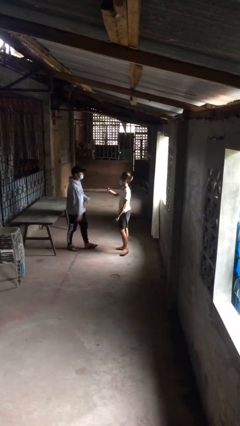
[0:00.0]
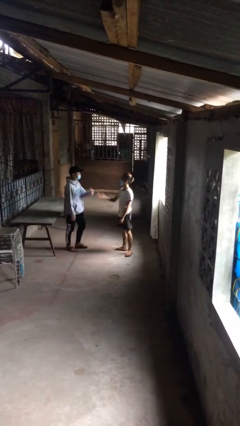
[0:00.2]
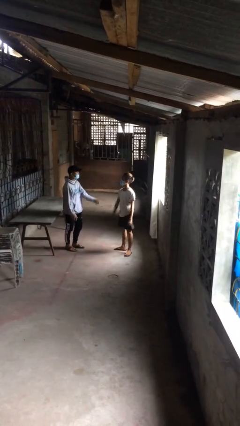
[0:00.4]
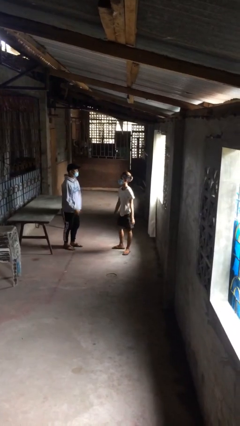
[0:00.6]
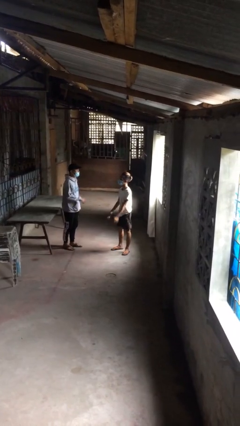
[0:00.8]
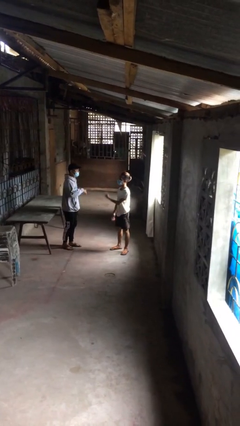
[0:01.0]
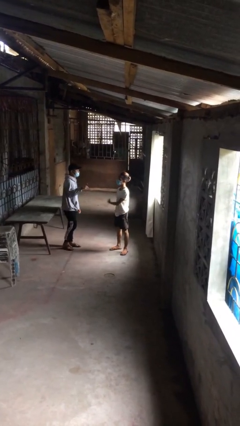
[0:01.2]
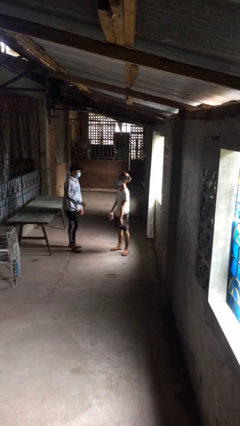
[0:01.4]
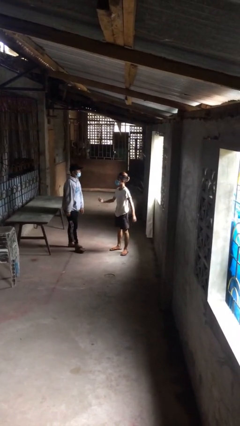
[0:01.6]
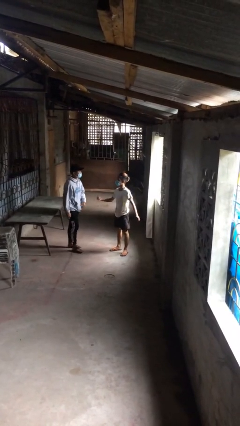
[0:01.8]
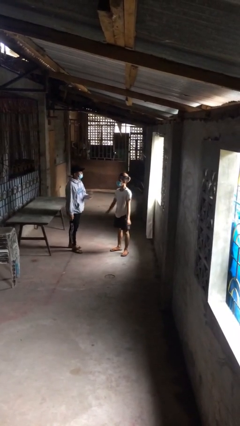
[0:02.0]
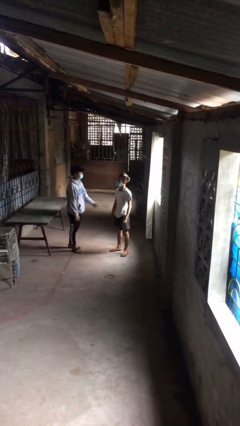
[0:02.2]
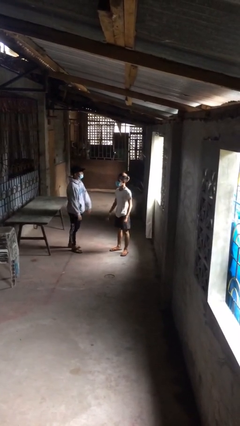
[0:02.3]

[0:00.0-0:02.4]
person talks to person

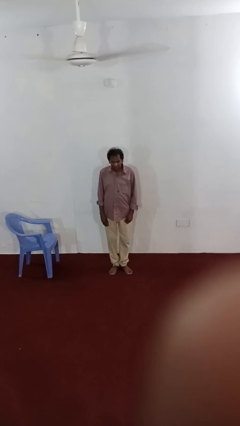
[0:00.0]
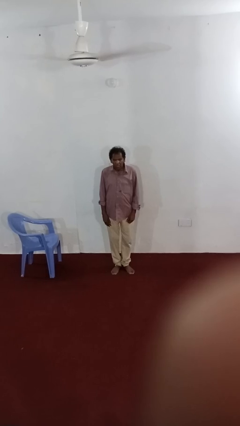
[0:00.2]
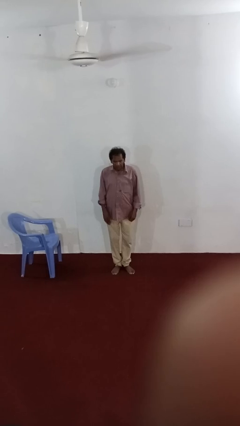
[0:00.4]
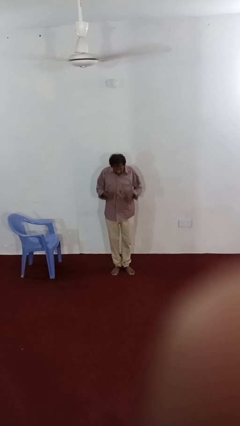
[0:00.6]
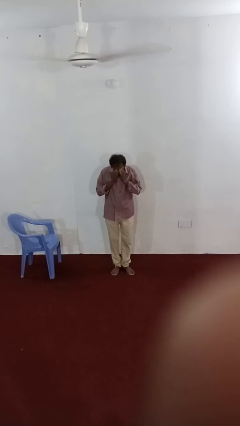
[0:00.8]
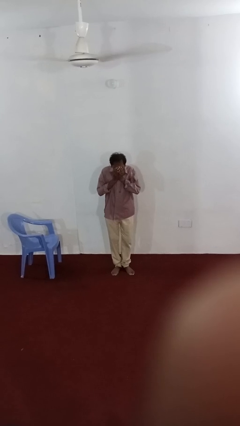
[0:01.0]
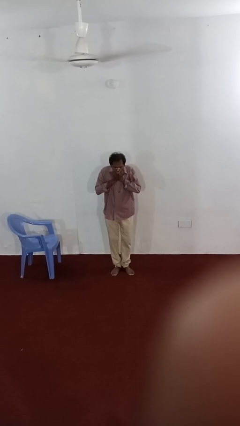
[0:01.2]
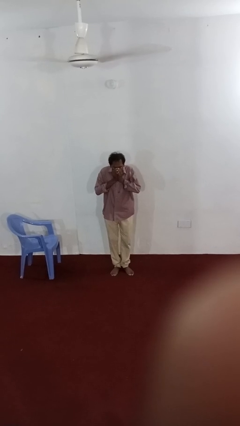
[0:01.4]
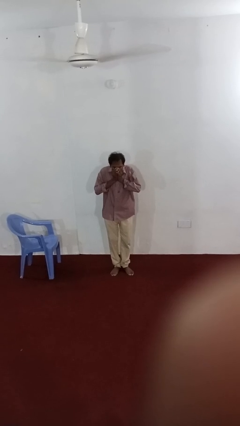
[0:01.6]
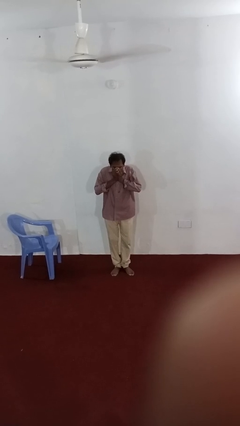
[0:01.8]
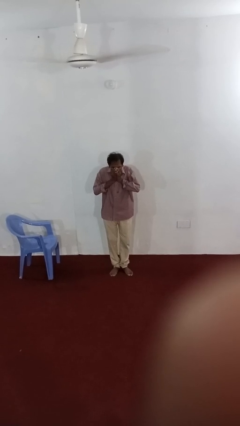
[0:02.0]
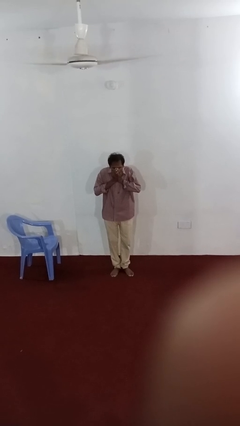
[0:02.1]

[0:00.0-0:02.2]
person sneezes into hand

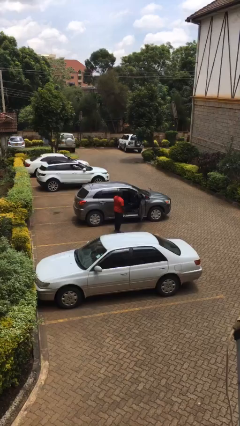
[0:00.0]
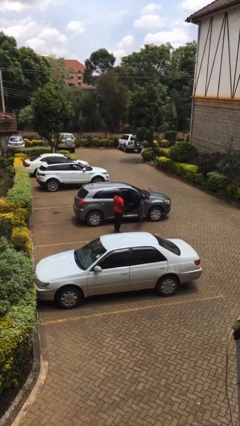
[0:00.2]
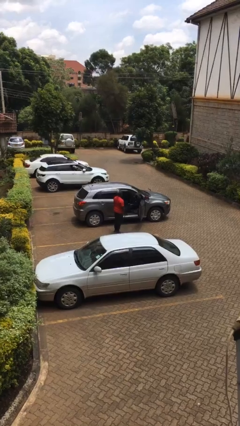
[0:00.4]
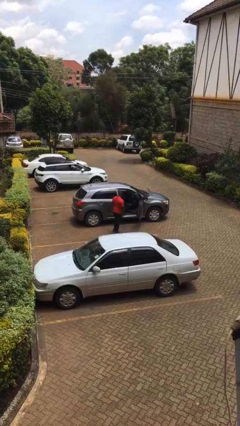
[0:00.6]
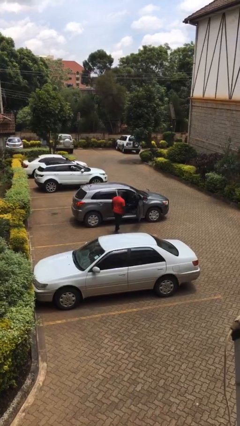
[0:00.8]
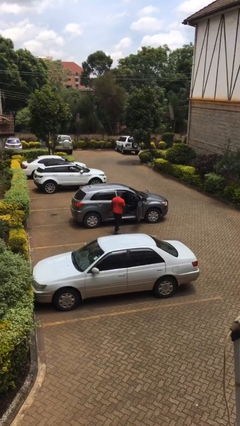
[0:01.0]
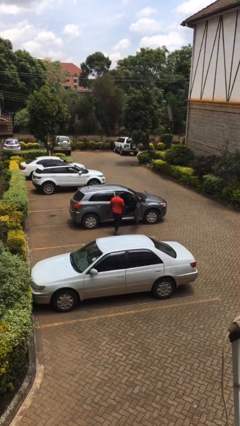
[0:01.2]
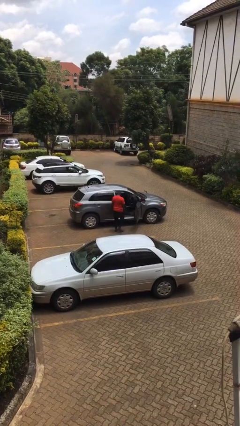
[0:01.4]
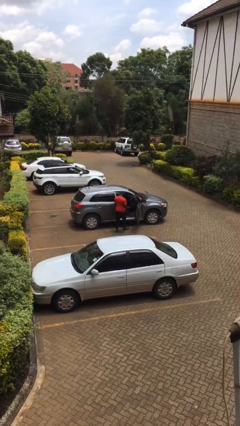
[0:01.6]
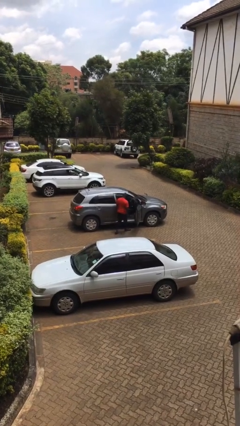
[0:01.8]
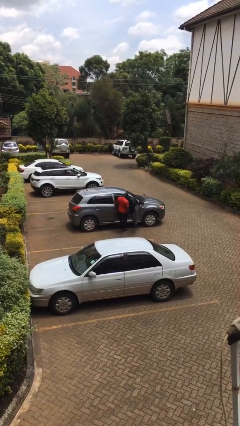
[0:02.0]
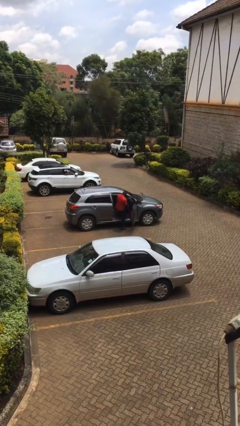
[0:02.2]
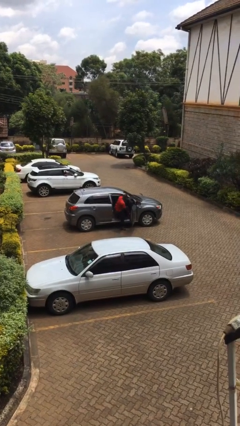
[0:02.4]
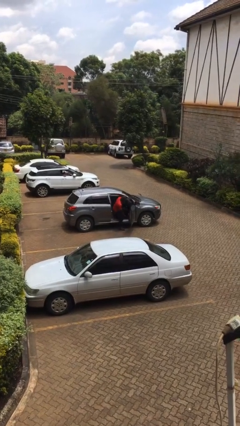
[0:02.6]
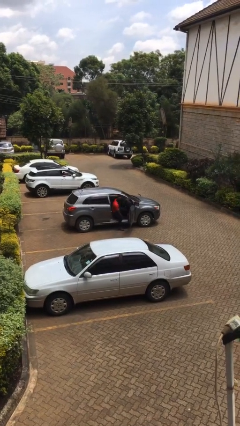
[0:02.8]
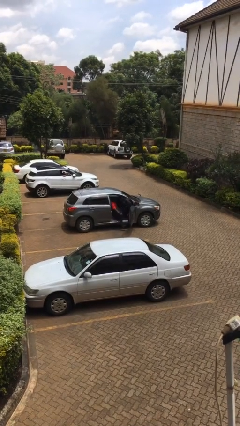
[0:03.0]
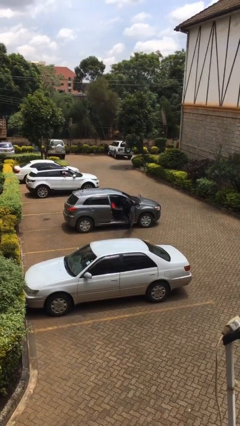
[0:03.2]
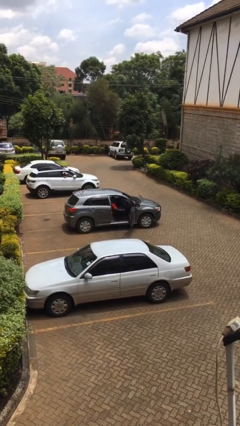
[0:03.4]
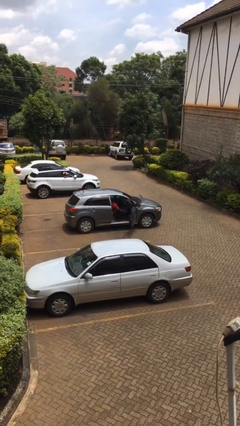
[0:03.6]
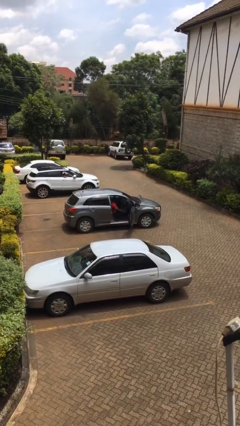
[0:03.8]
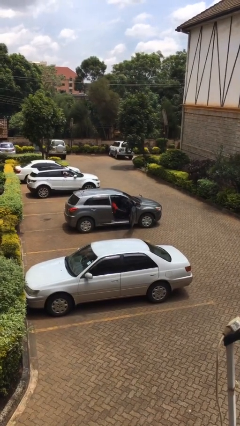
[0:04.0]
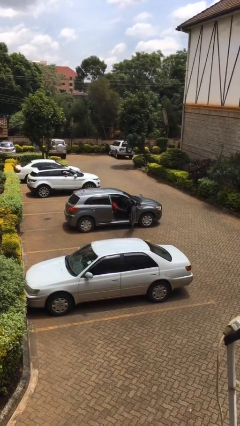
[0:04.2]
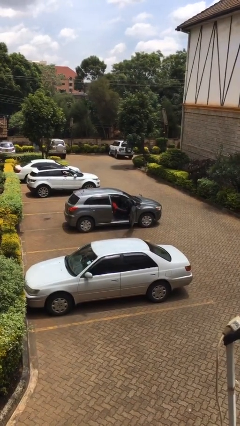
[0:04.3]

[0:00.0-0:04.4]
person enters car

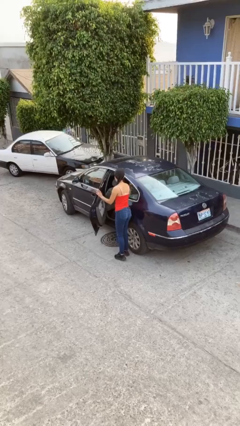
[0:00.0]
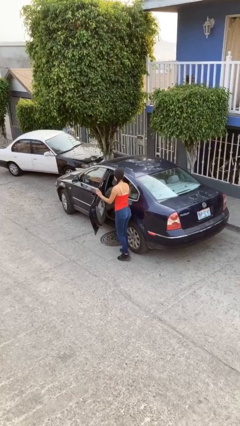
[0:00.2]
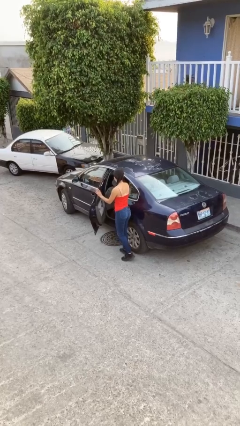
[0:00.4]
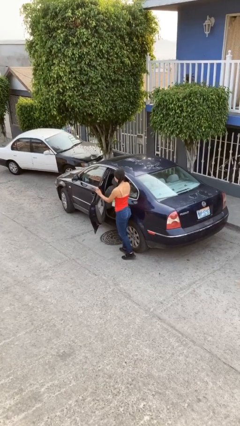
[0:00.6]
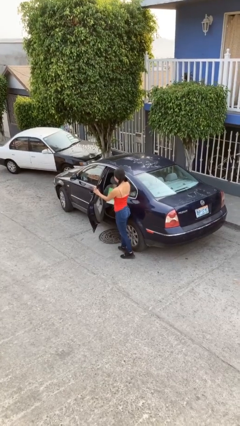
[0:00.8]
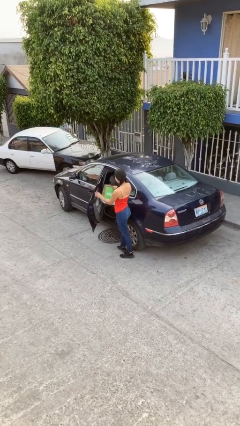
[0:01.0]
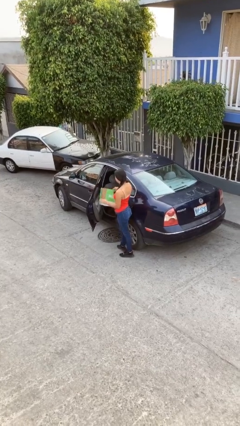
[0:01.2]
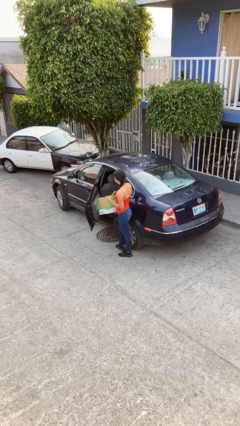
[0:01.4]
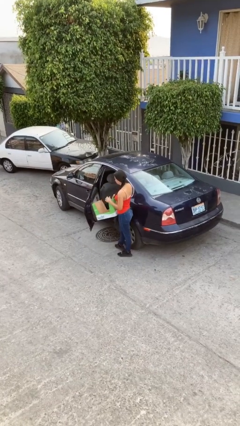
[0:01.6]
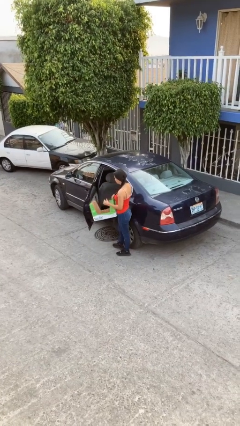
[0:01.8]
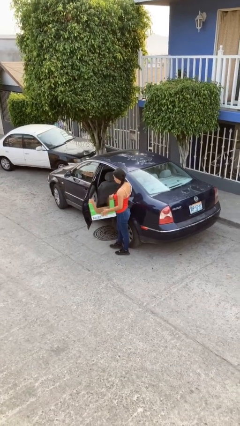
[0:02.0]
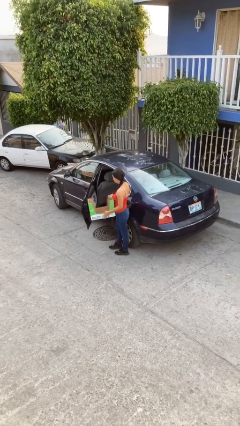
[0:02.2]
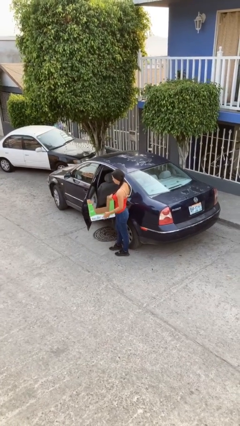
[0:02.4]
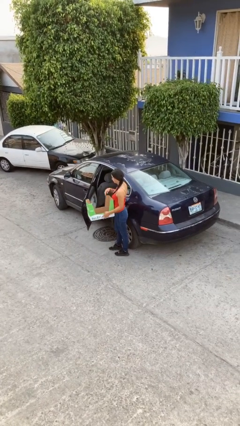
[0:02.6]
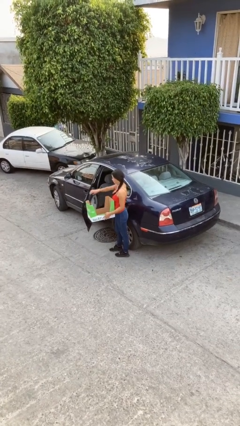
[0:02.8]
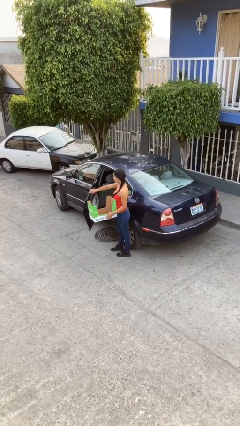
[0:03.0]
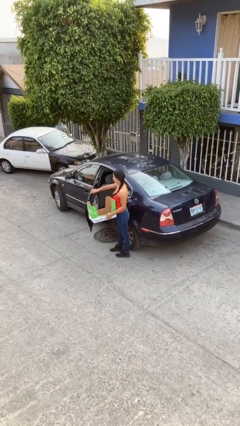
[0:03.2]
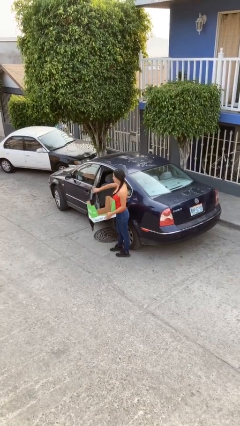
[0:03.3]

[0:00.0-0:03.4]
person unloads car

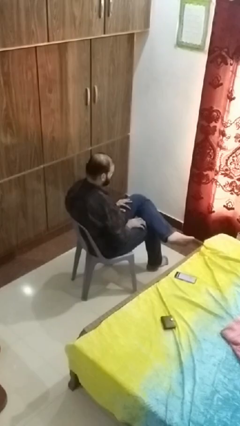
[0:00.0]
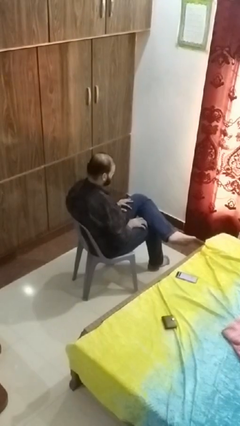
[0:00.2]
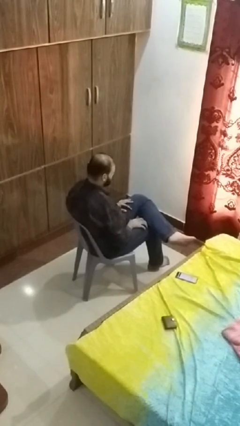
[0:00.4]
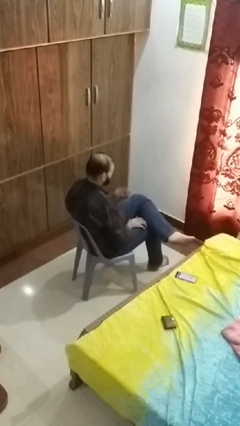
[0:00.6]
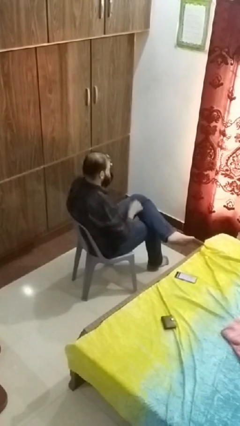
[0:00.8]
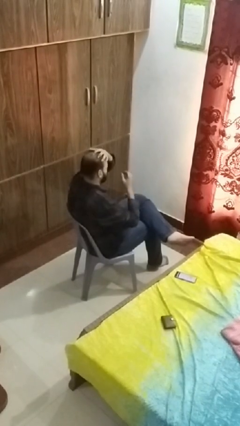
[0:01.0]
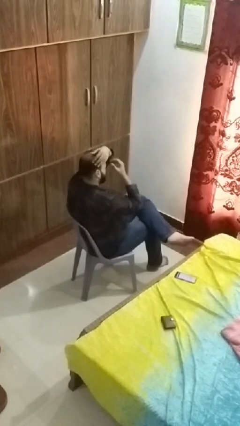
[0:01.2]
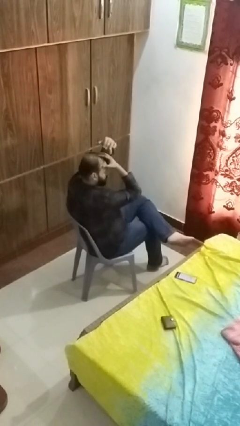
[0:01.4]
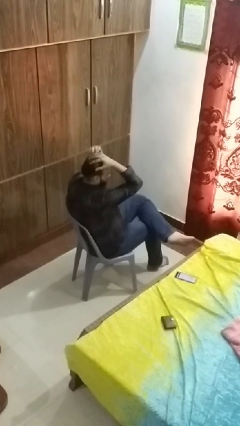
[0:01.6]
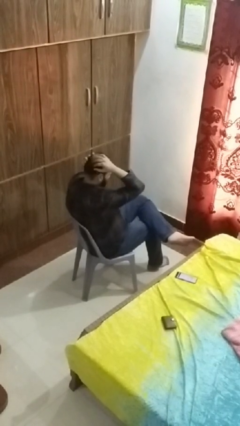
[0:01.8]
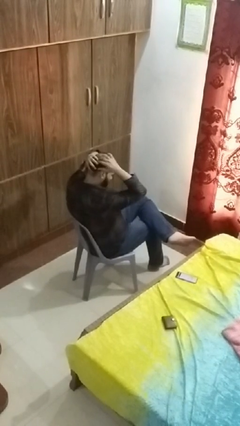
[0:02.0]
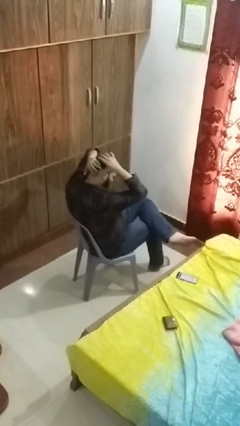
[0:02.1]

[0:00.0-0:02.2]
person strokes hair

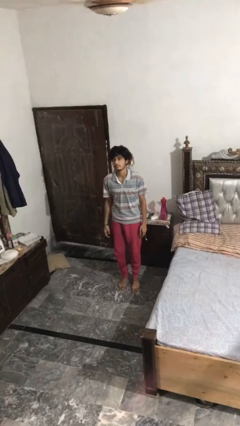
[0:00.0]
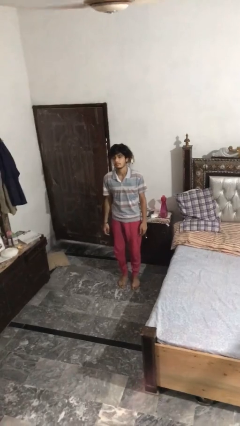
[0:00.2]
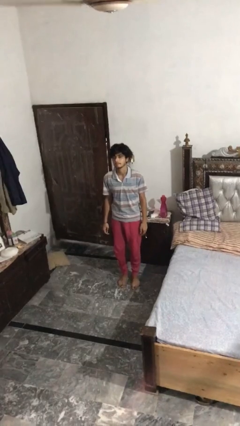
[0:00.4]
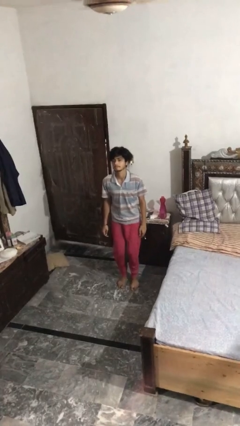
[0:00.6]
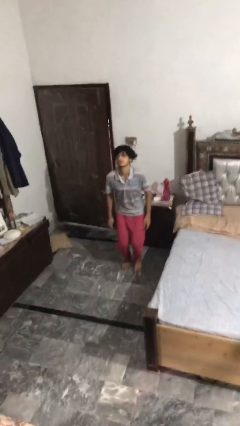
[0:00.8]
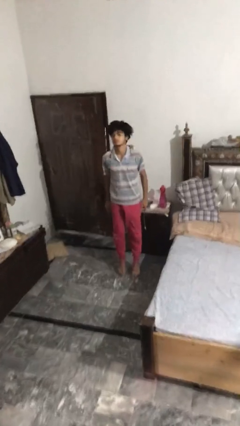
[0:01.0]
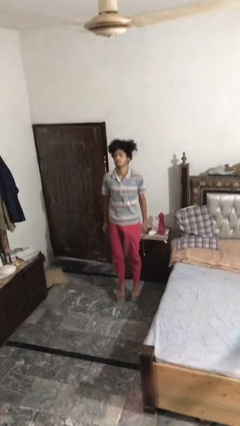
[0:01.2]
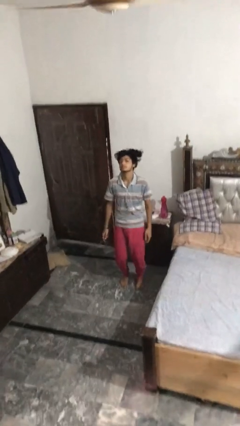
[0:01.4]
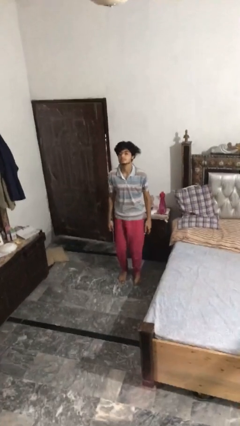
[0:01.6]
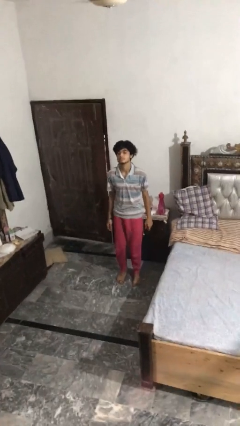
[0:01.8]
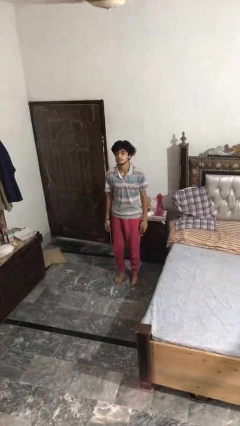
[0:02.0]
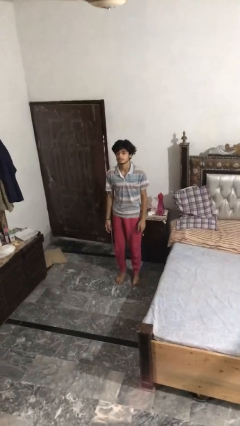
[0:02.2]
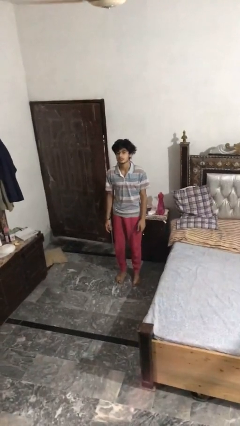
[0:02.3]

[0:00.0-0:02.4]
person jumps

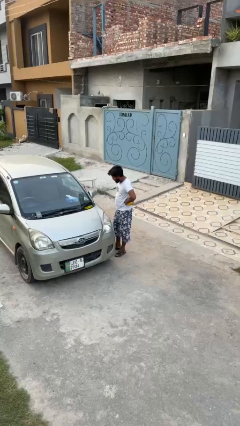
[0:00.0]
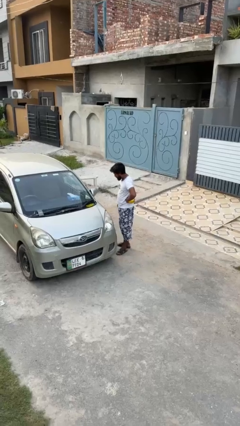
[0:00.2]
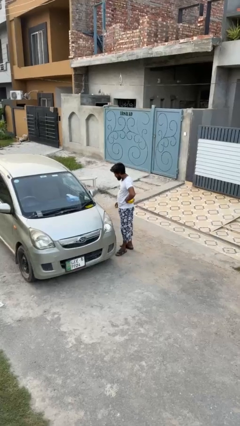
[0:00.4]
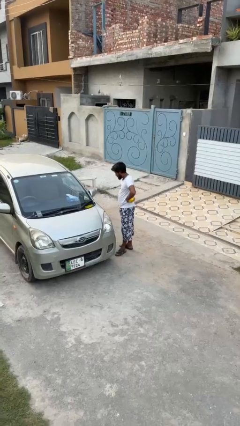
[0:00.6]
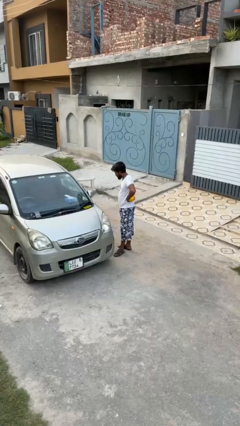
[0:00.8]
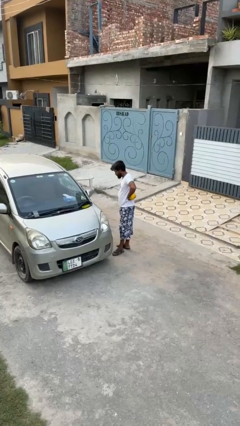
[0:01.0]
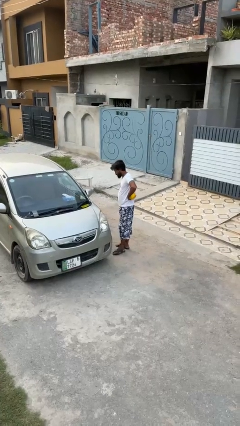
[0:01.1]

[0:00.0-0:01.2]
person polishes car with rag
